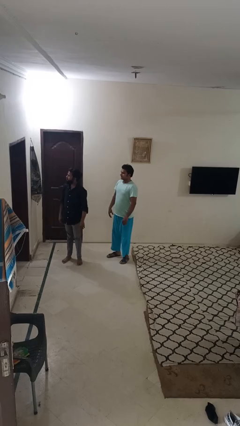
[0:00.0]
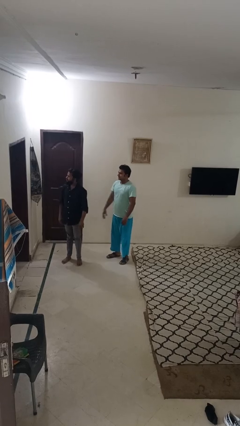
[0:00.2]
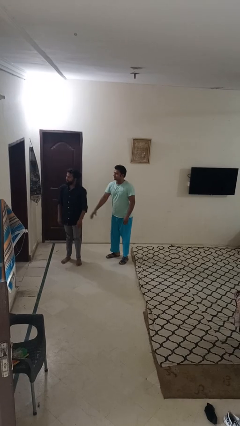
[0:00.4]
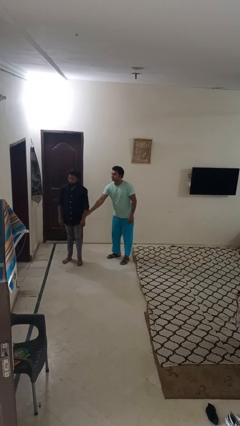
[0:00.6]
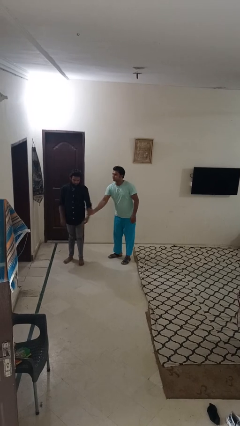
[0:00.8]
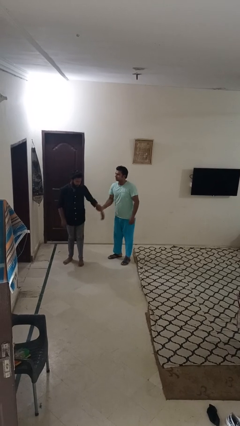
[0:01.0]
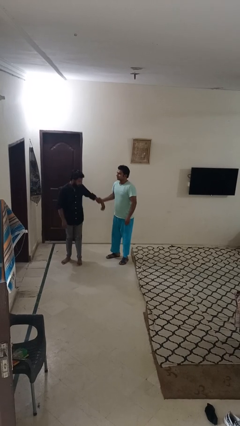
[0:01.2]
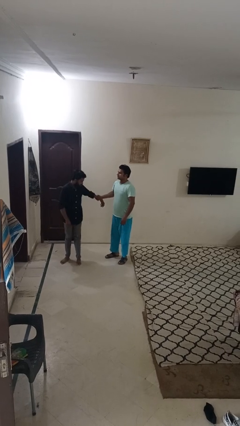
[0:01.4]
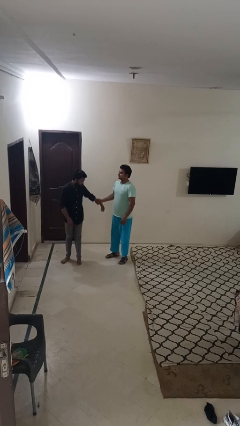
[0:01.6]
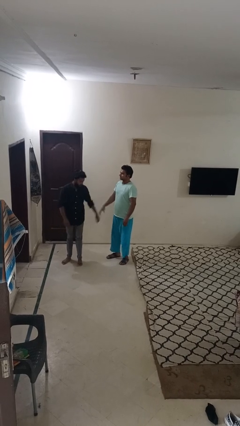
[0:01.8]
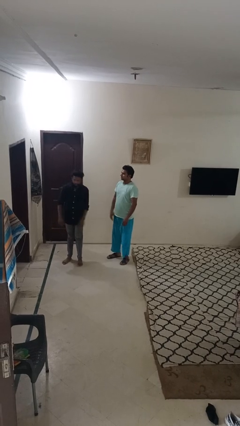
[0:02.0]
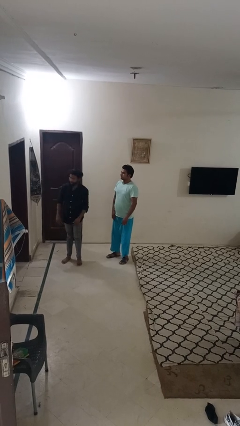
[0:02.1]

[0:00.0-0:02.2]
person grabs person by forearm

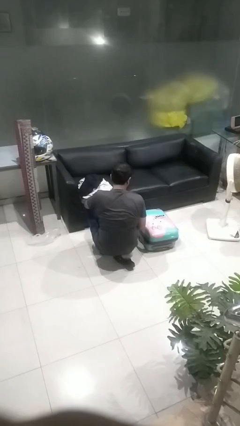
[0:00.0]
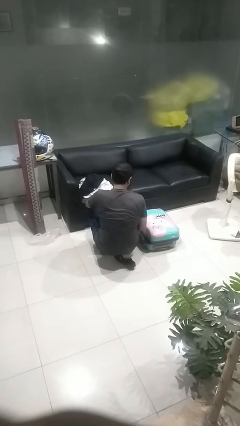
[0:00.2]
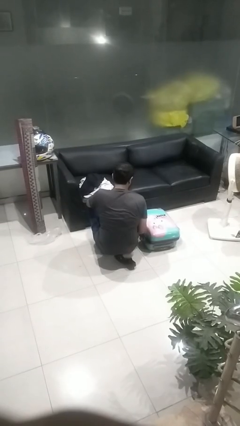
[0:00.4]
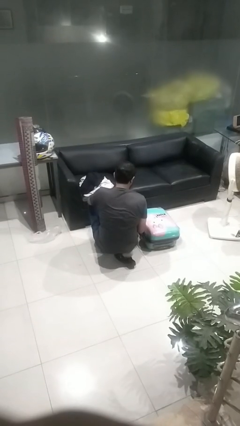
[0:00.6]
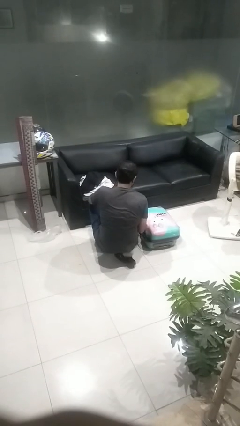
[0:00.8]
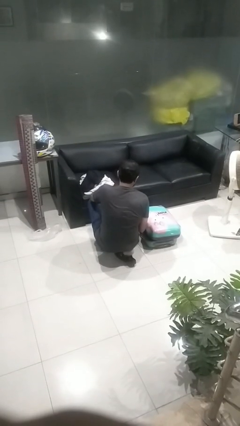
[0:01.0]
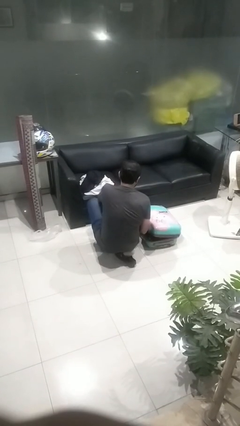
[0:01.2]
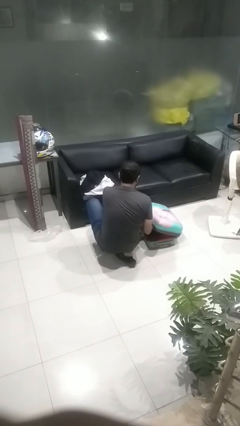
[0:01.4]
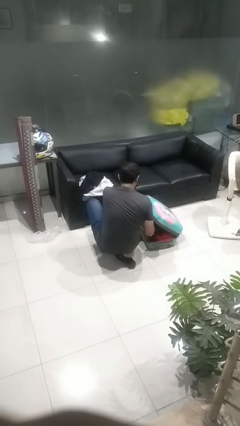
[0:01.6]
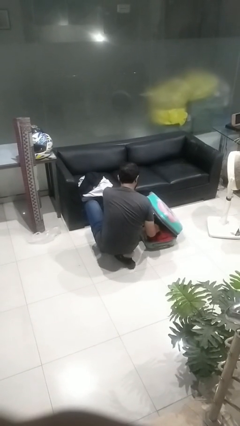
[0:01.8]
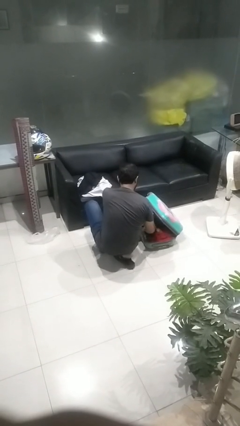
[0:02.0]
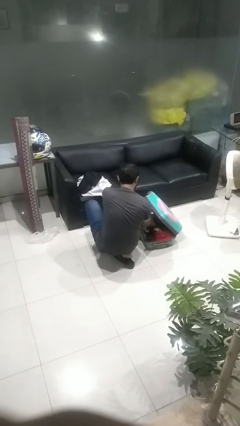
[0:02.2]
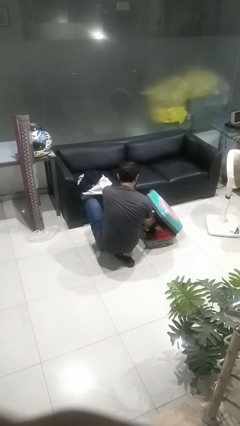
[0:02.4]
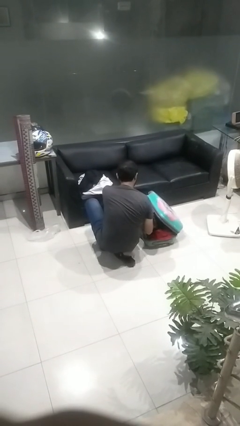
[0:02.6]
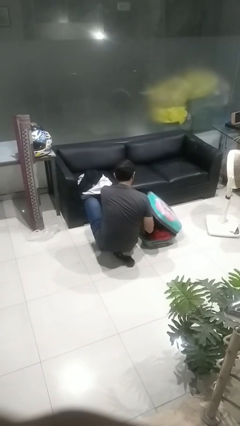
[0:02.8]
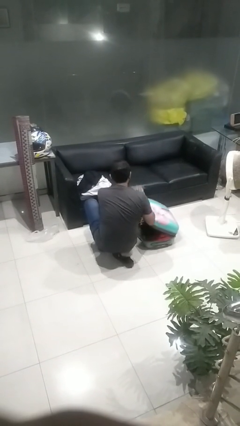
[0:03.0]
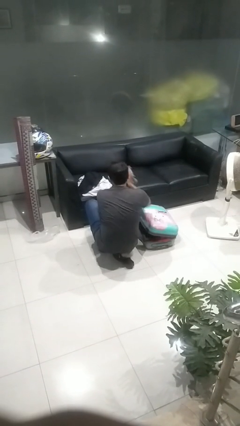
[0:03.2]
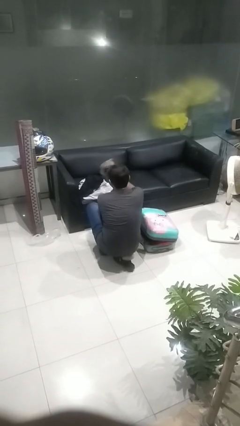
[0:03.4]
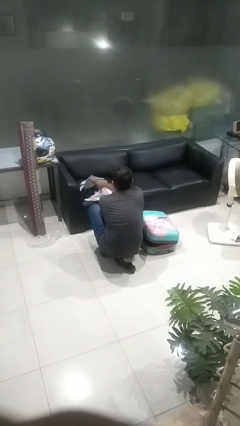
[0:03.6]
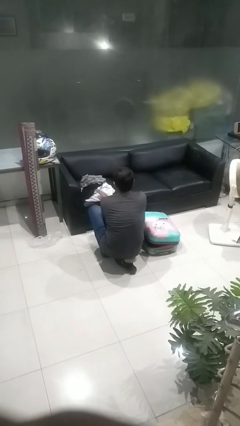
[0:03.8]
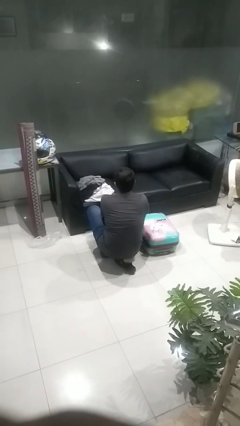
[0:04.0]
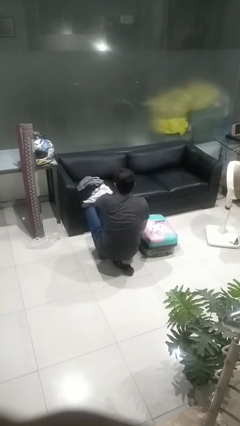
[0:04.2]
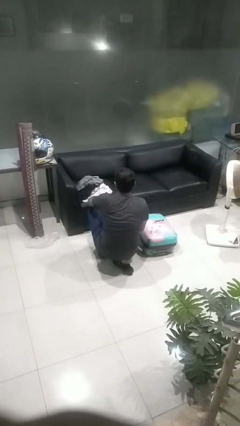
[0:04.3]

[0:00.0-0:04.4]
person unloads clothes from suitcase

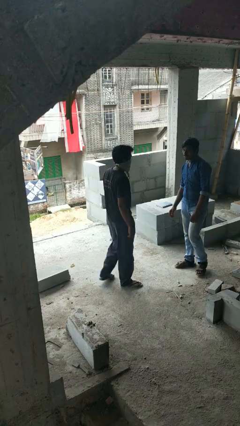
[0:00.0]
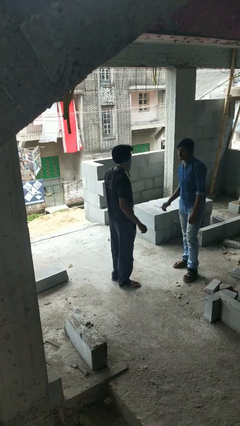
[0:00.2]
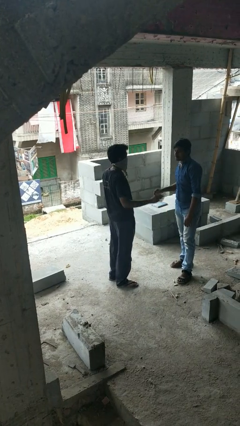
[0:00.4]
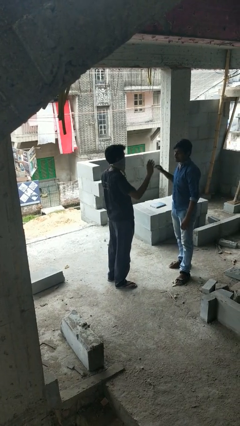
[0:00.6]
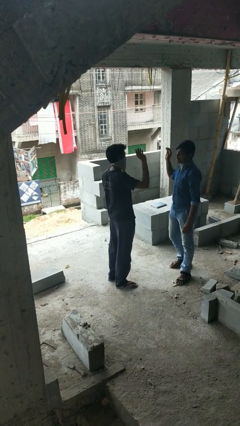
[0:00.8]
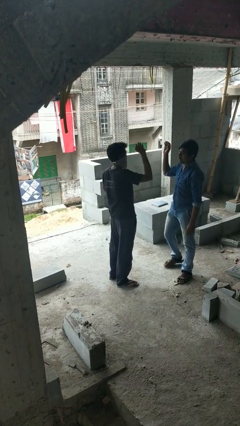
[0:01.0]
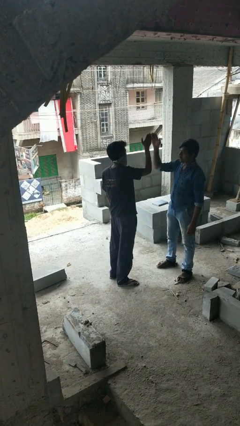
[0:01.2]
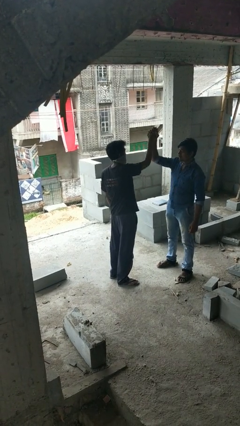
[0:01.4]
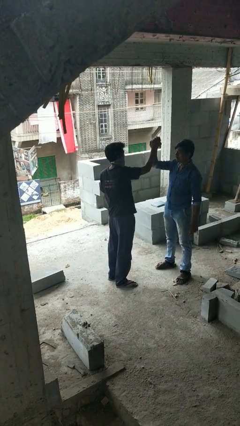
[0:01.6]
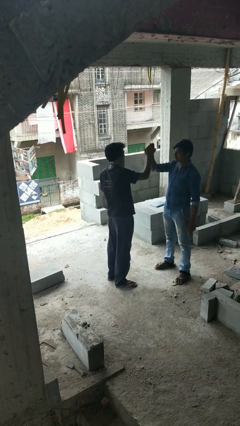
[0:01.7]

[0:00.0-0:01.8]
person highfives hand

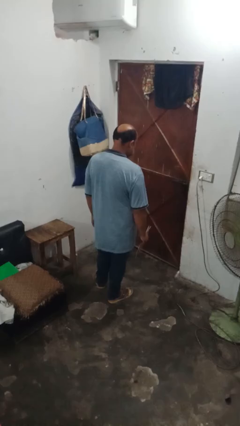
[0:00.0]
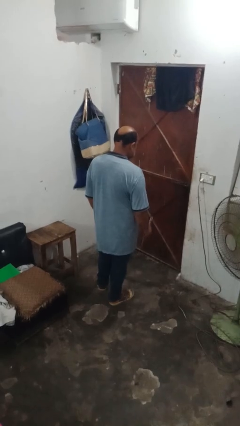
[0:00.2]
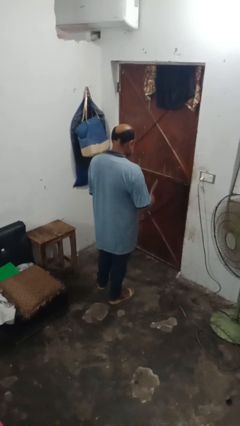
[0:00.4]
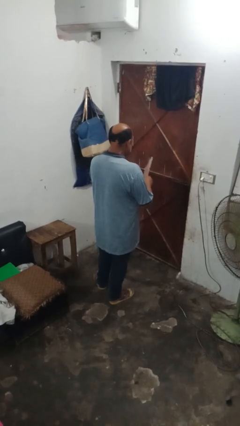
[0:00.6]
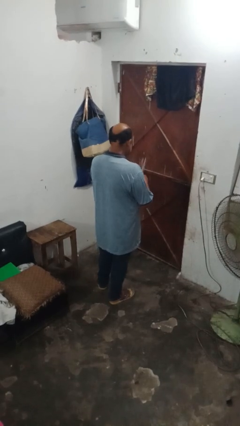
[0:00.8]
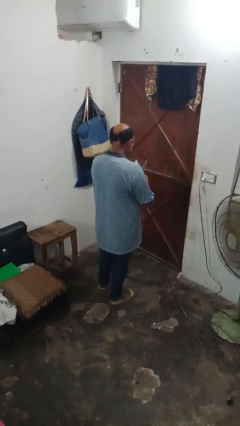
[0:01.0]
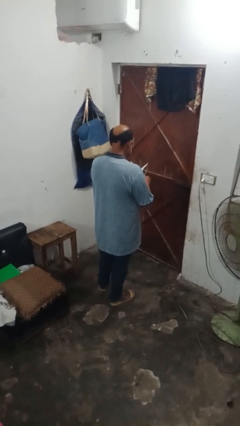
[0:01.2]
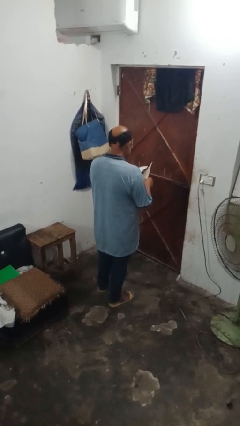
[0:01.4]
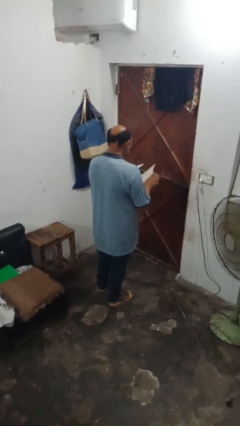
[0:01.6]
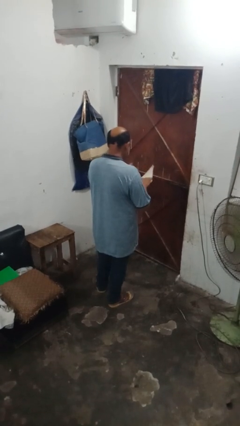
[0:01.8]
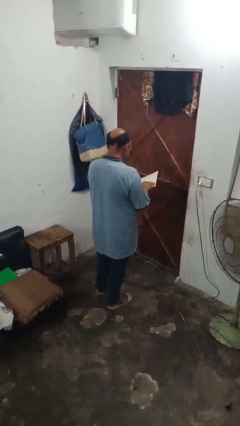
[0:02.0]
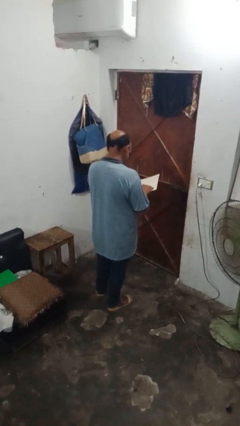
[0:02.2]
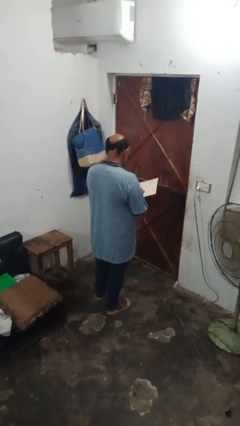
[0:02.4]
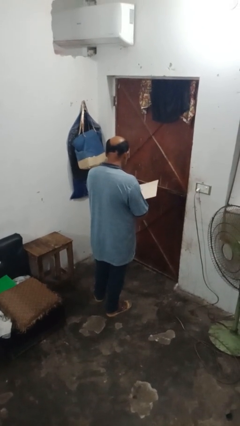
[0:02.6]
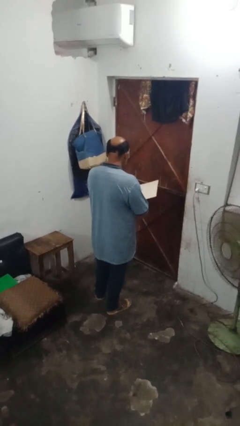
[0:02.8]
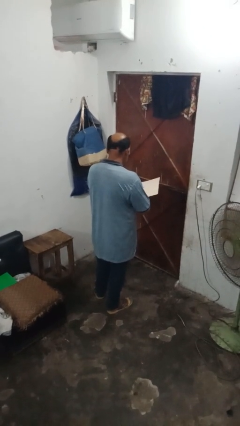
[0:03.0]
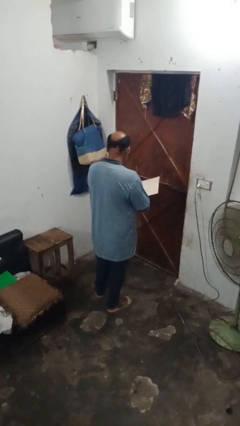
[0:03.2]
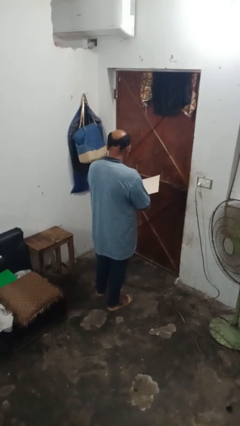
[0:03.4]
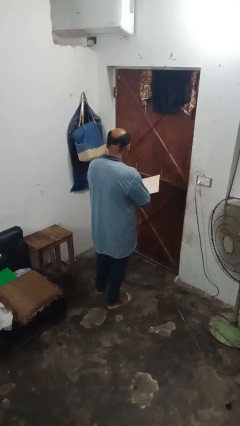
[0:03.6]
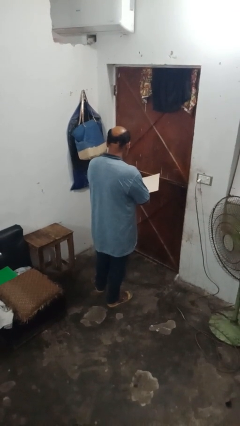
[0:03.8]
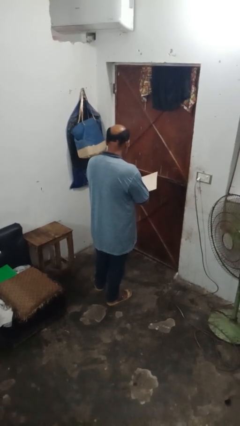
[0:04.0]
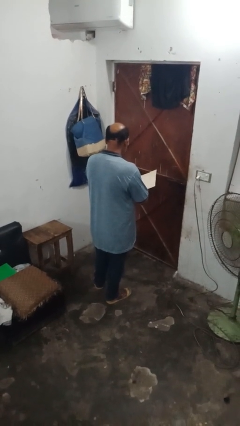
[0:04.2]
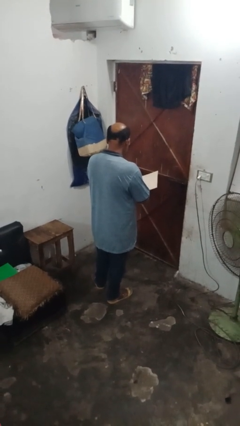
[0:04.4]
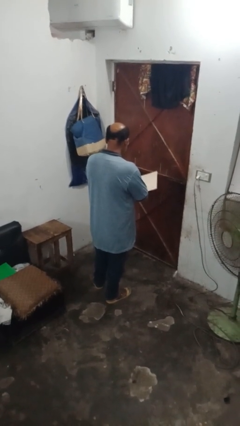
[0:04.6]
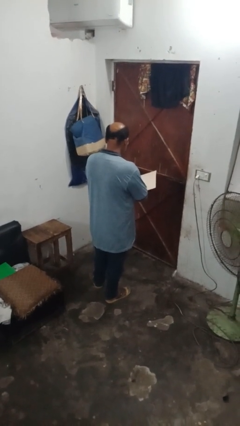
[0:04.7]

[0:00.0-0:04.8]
person reads magazine

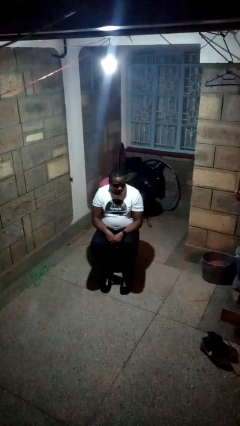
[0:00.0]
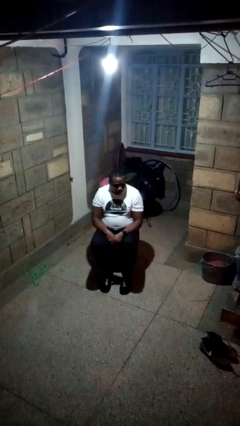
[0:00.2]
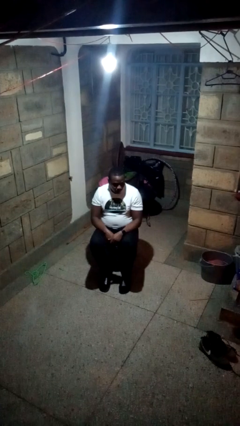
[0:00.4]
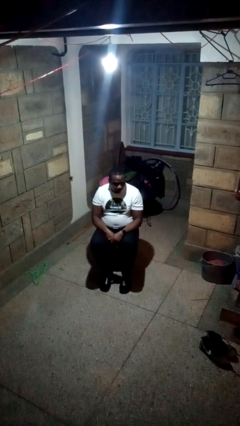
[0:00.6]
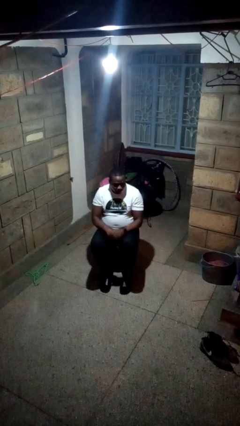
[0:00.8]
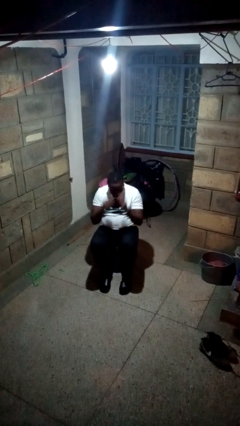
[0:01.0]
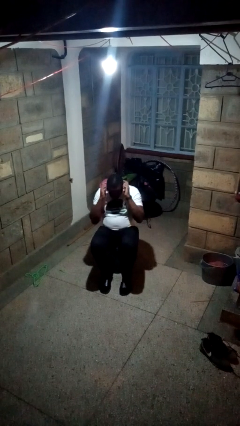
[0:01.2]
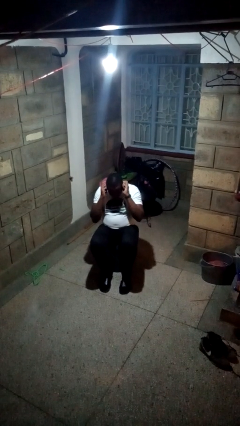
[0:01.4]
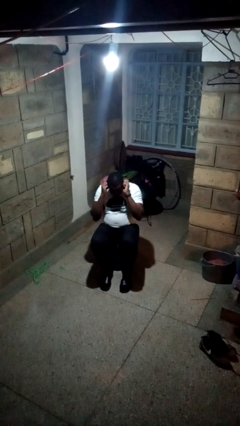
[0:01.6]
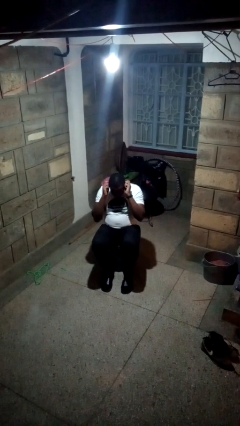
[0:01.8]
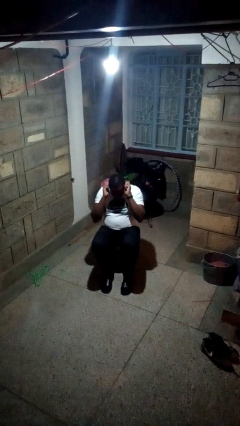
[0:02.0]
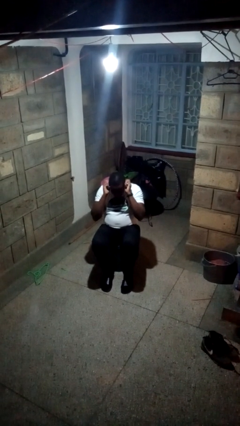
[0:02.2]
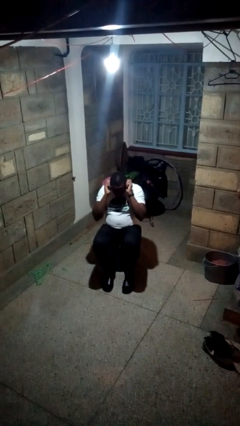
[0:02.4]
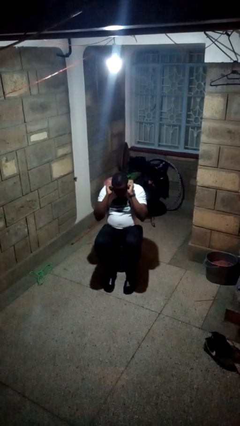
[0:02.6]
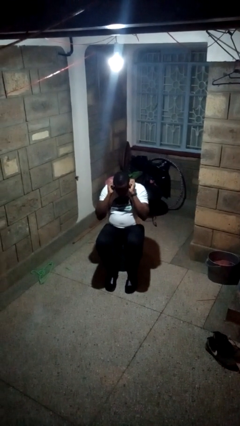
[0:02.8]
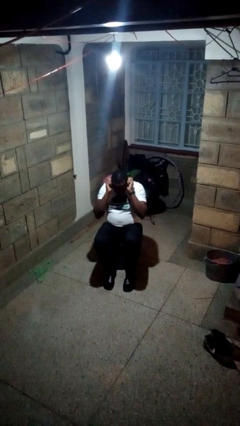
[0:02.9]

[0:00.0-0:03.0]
person touches earlobe

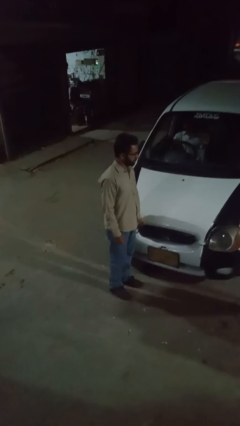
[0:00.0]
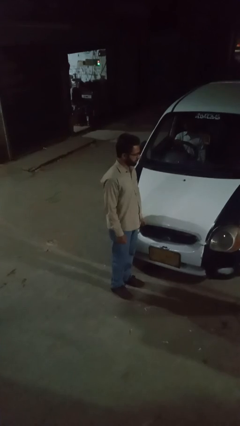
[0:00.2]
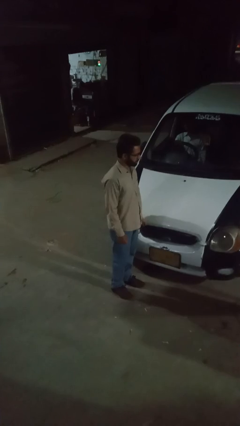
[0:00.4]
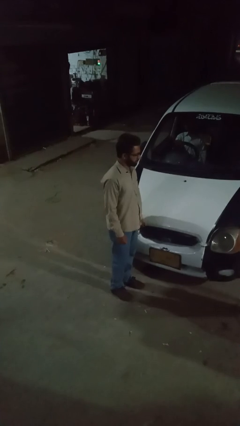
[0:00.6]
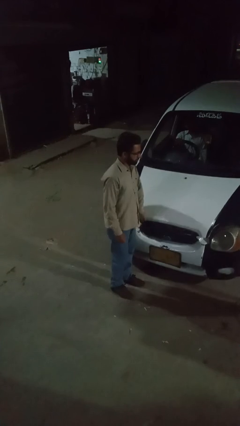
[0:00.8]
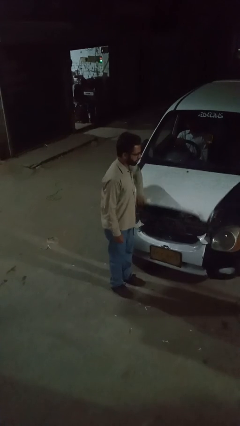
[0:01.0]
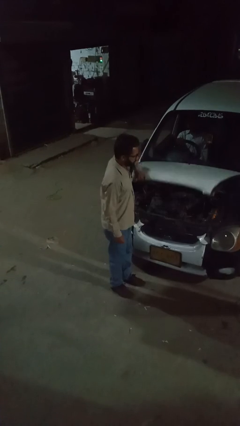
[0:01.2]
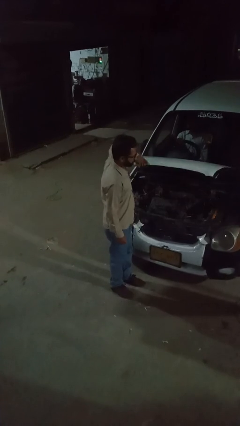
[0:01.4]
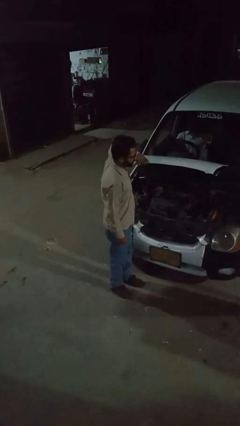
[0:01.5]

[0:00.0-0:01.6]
person opens car hood
